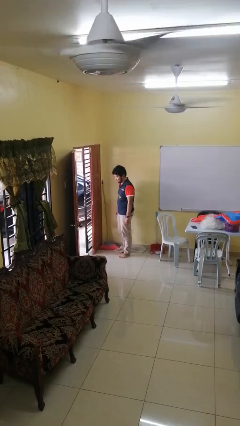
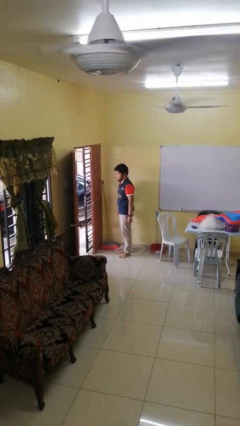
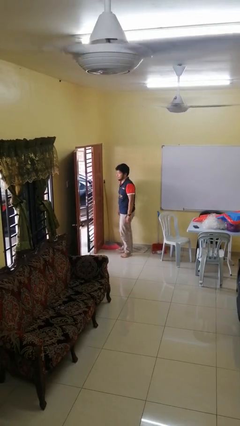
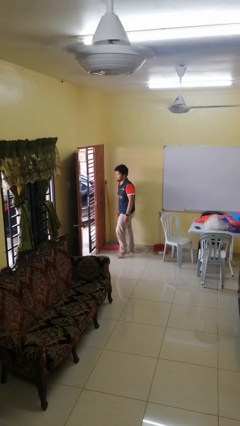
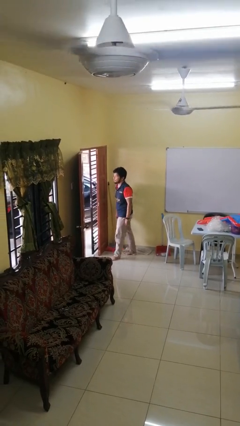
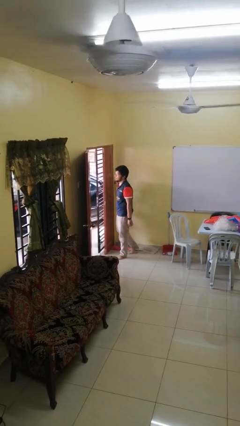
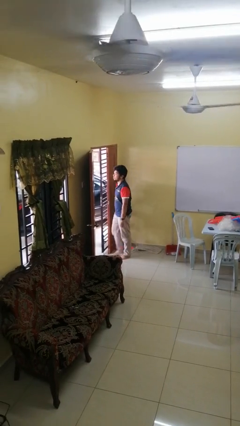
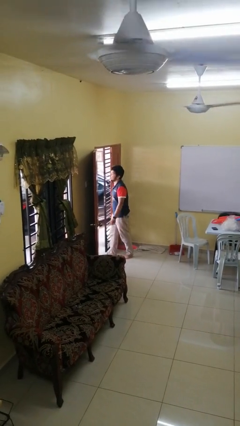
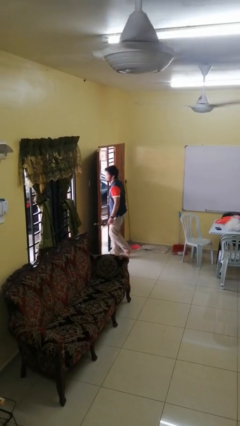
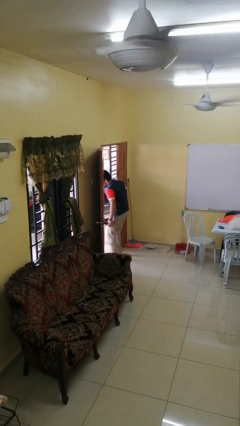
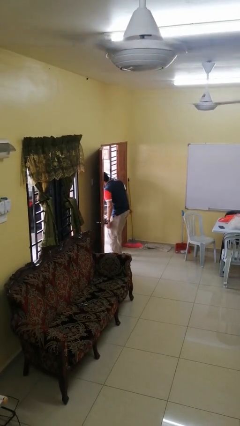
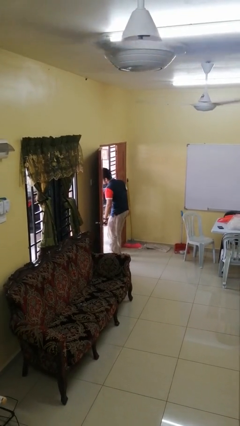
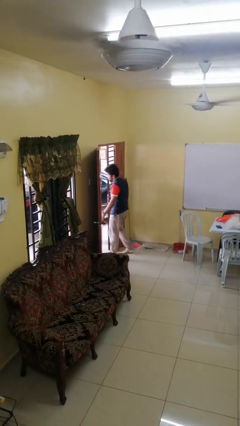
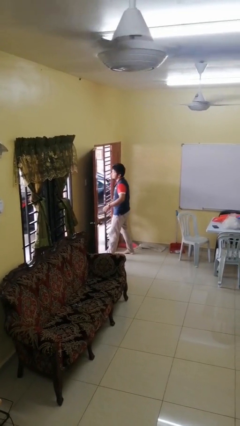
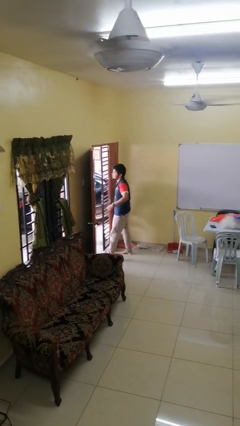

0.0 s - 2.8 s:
person bumps into wall

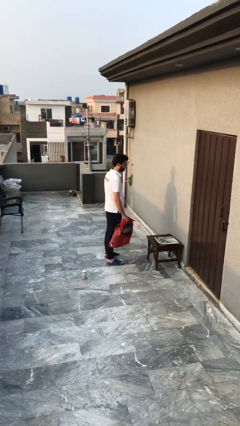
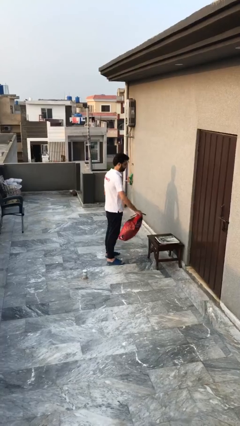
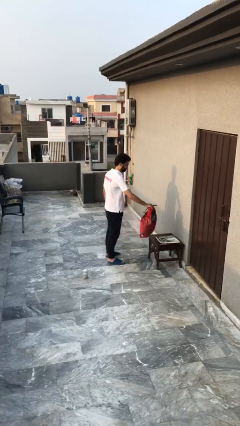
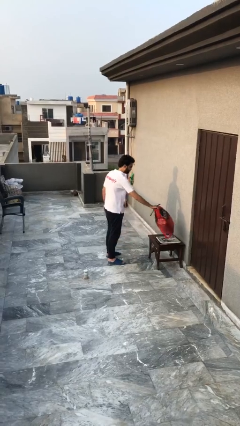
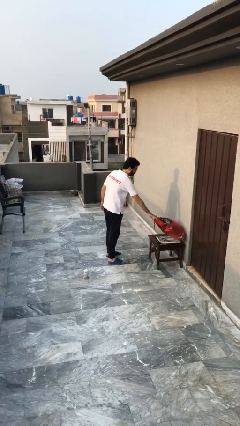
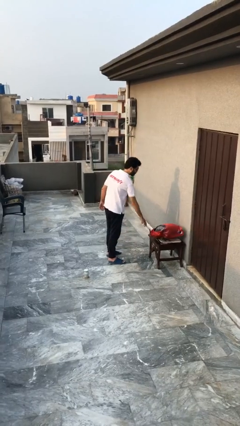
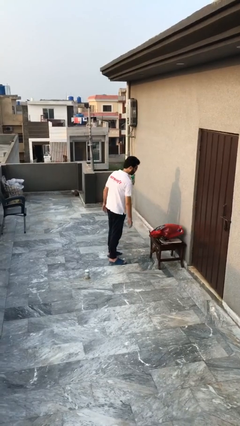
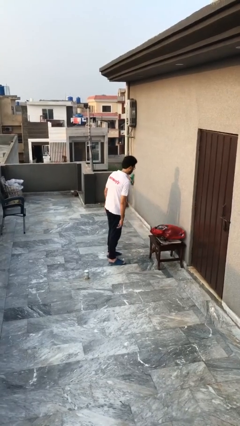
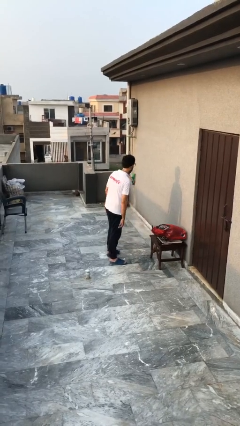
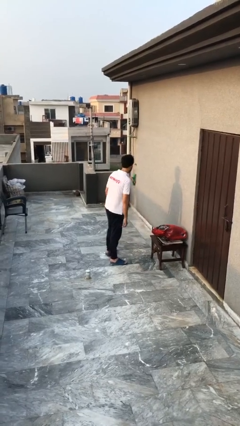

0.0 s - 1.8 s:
person puts down object on table

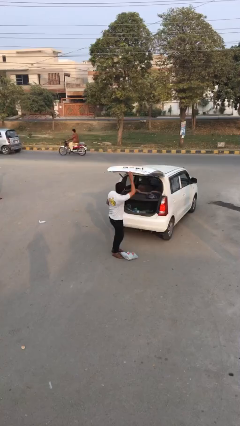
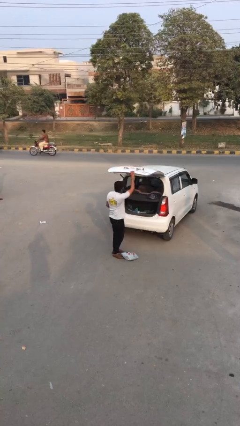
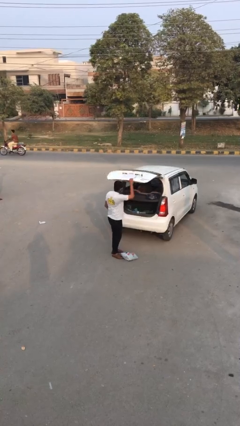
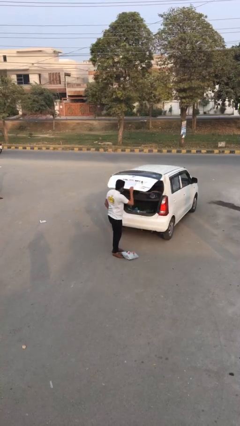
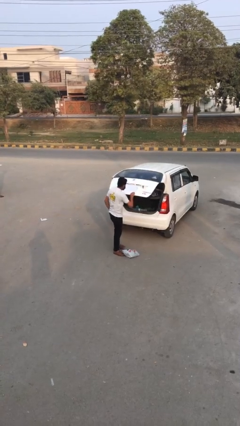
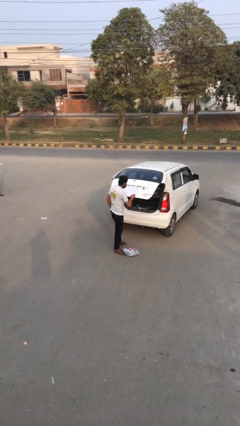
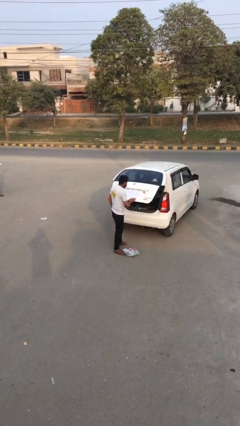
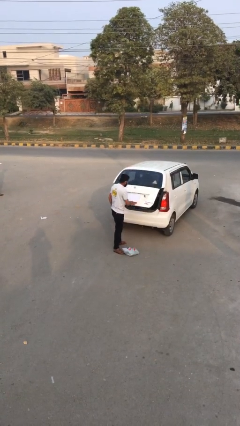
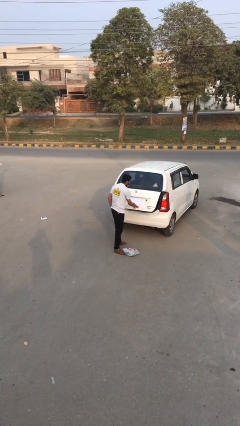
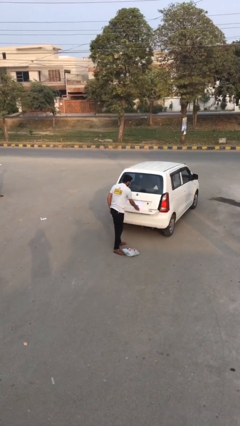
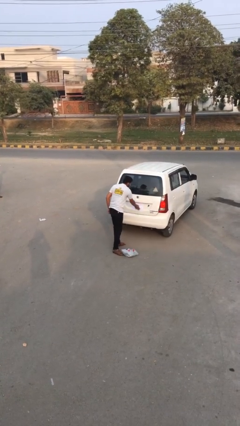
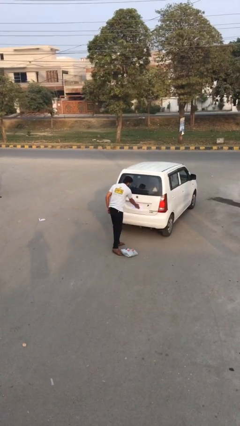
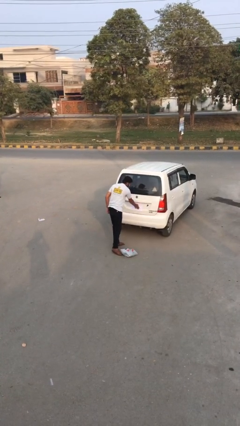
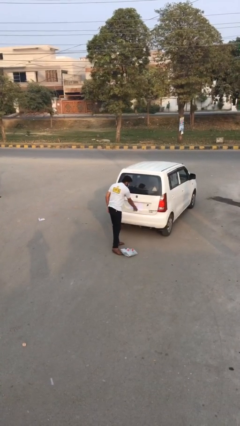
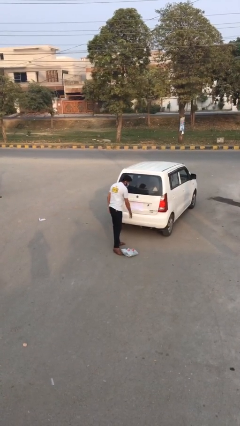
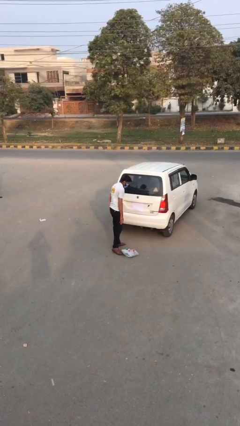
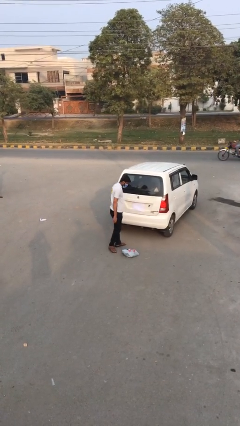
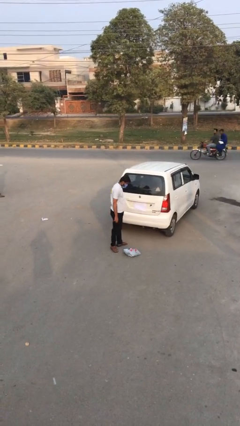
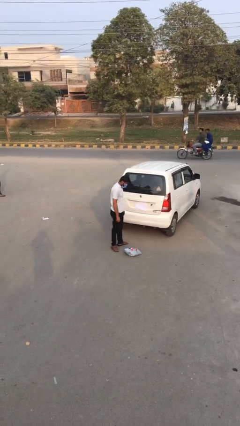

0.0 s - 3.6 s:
person closes car trunk

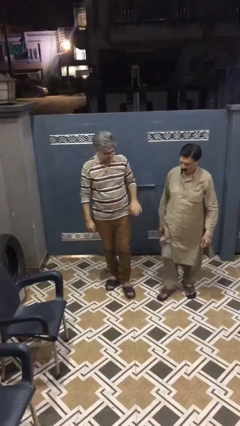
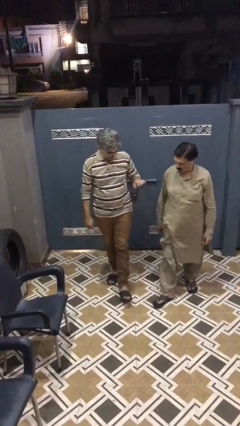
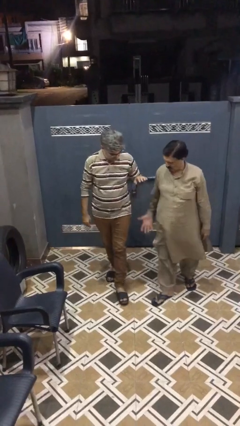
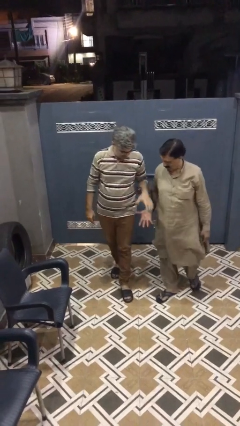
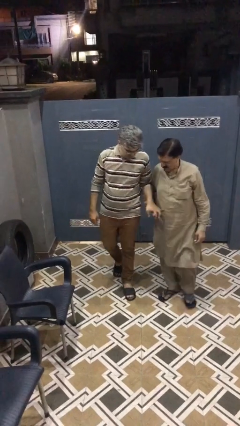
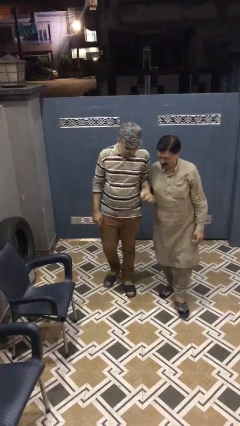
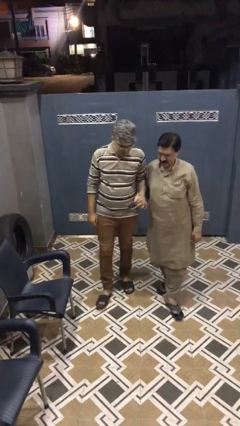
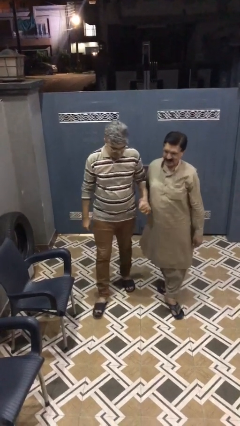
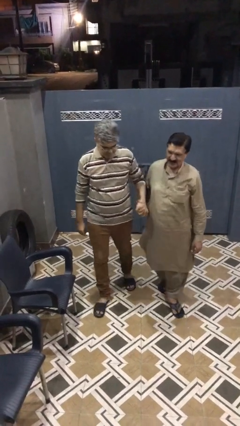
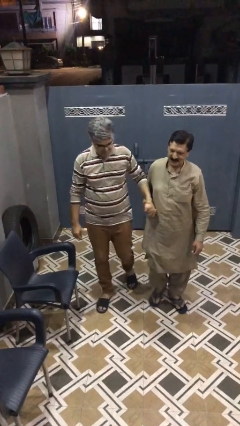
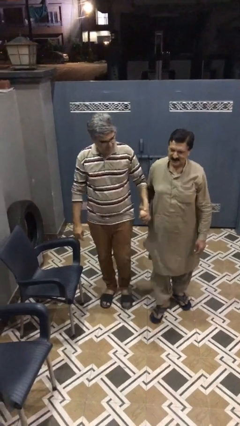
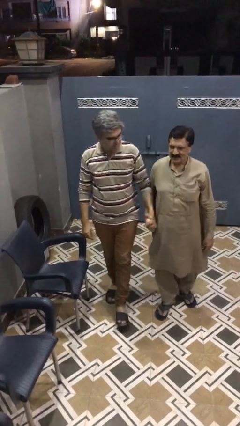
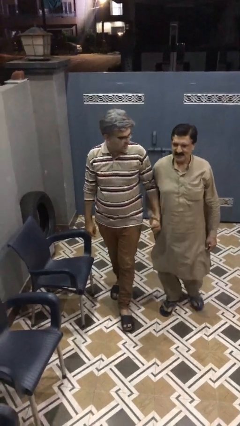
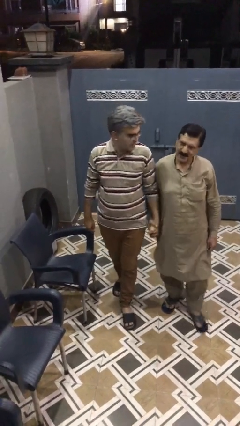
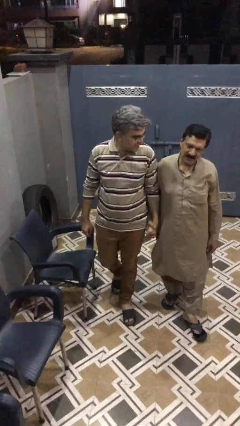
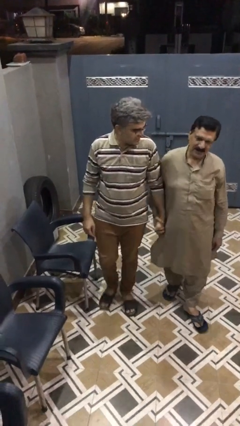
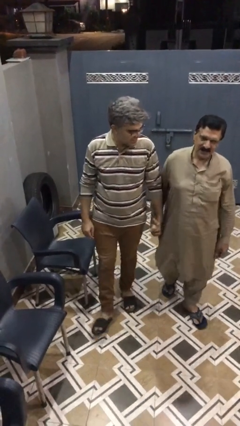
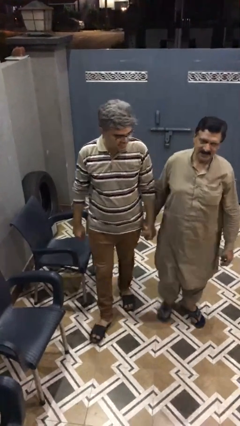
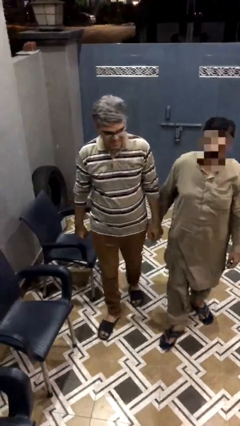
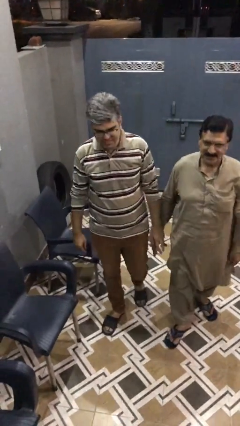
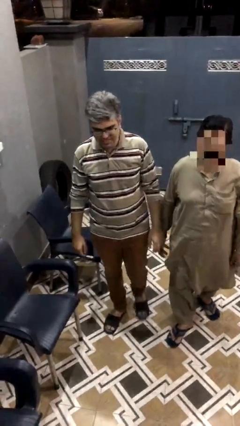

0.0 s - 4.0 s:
person holds hand

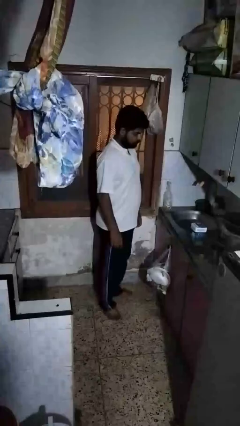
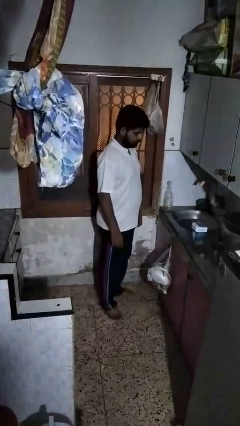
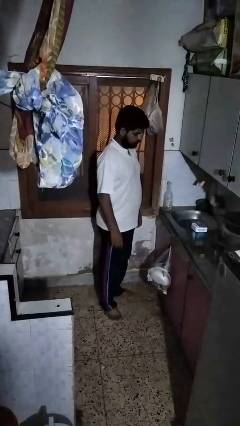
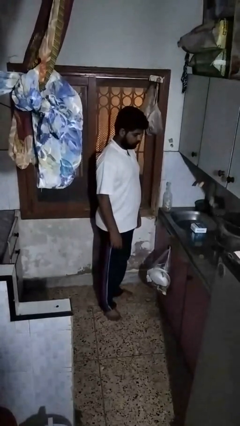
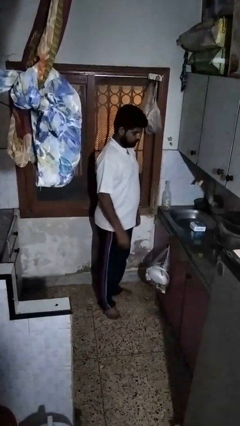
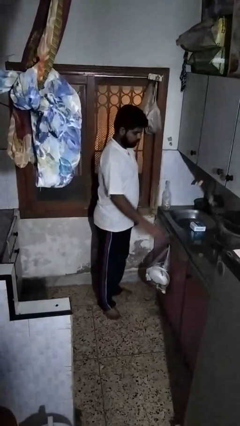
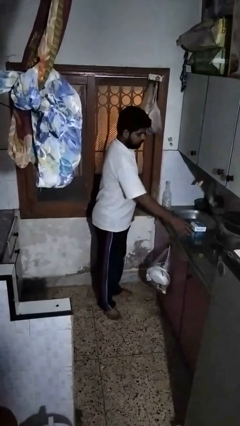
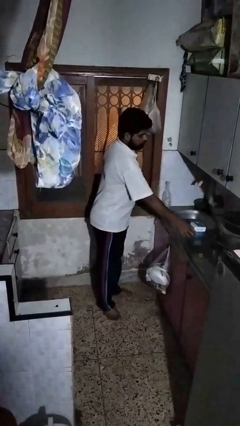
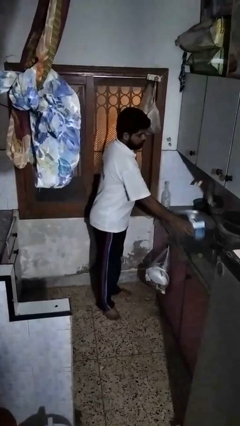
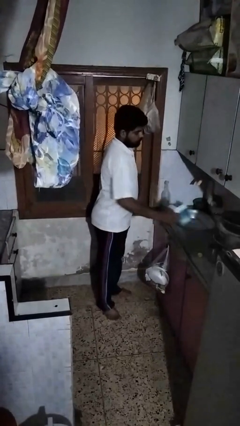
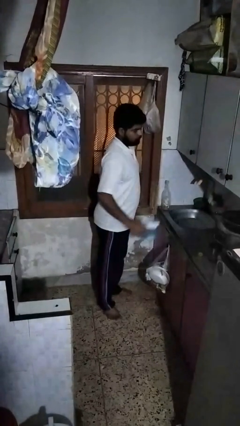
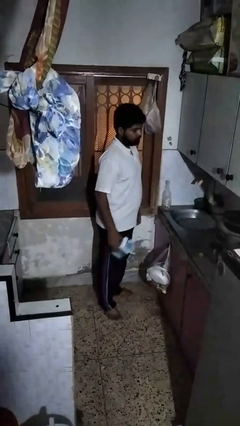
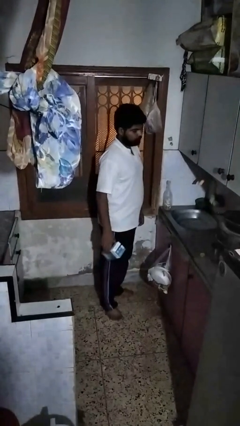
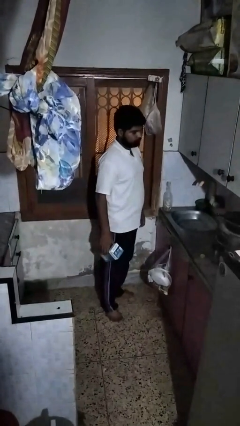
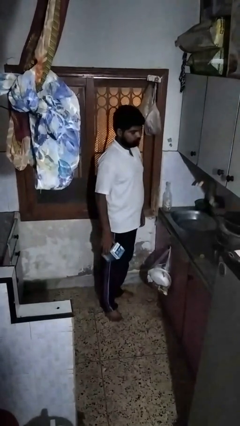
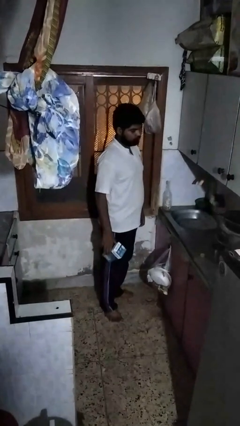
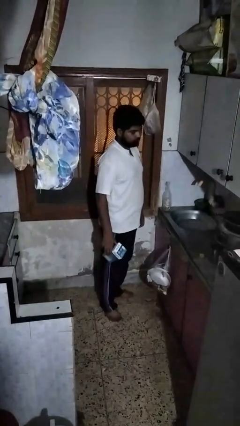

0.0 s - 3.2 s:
person picks up object from countertop

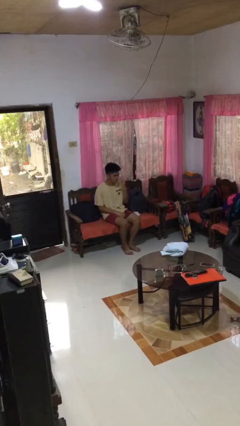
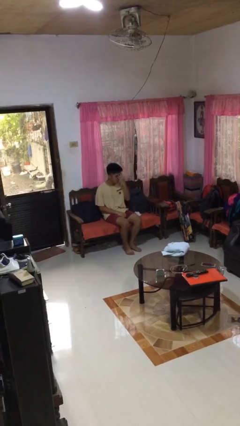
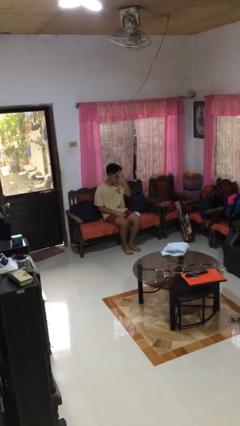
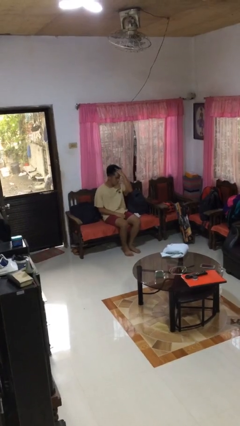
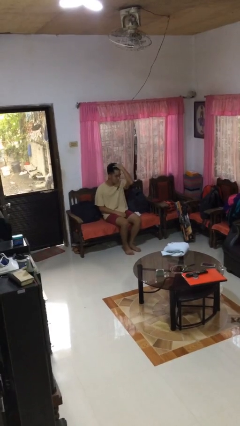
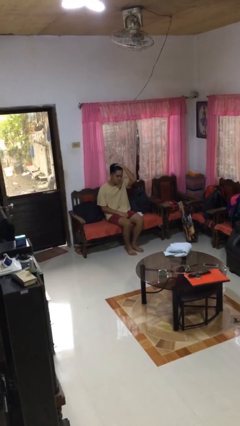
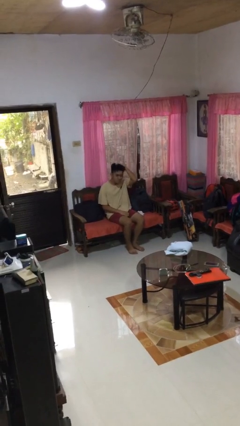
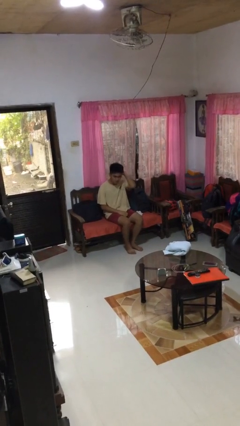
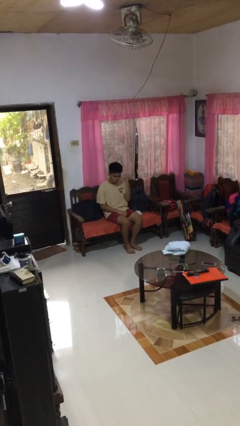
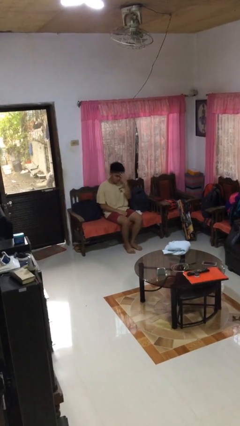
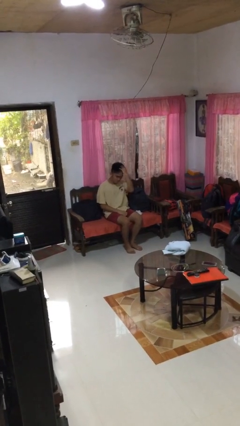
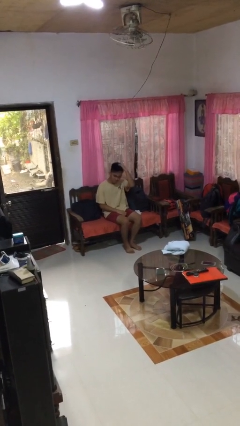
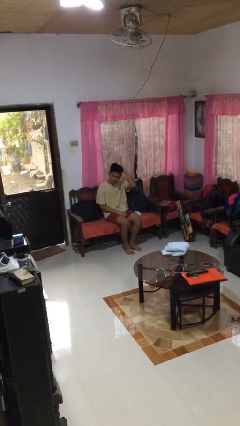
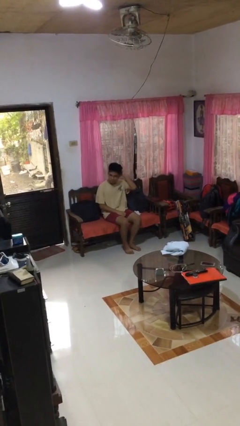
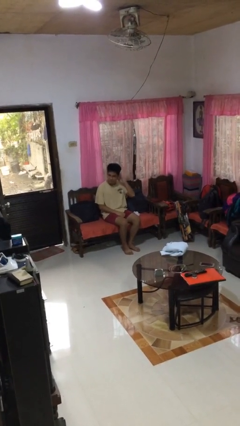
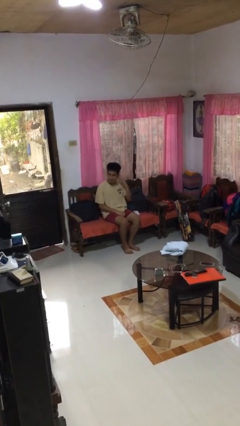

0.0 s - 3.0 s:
person strokes hair
